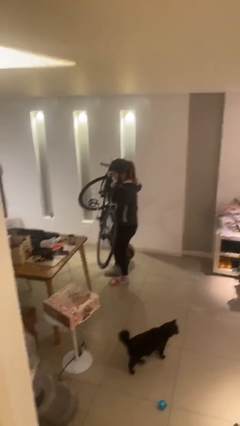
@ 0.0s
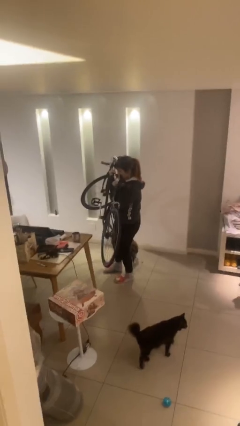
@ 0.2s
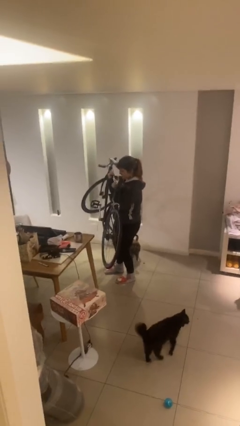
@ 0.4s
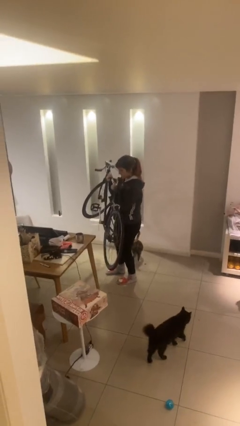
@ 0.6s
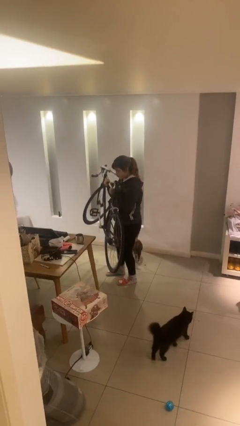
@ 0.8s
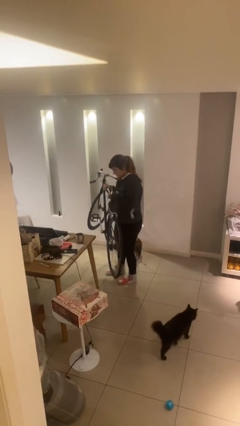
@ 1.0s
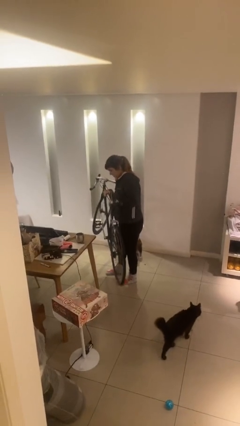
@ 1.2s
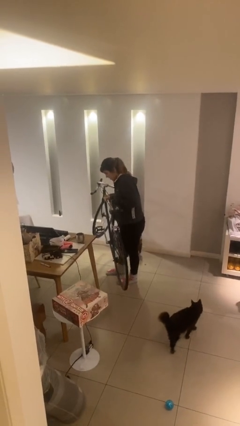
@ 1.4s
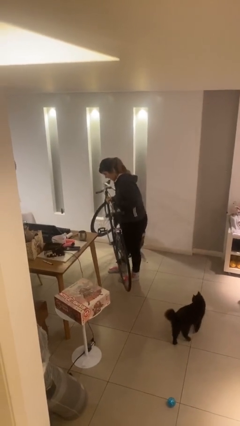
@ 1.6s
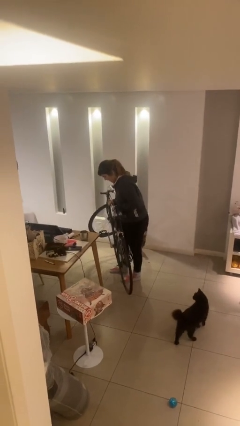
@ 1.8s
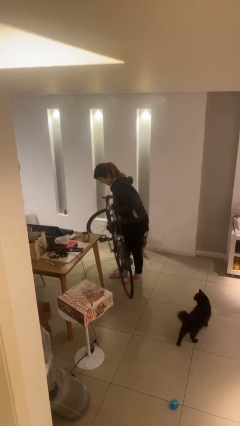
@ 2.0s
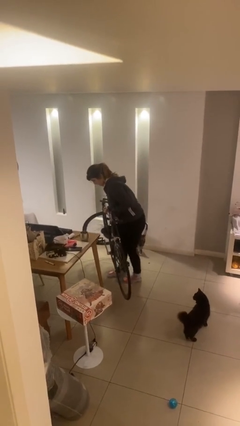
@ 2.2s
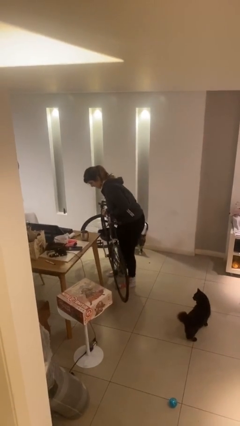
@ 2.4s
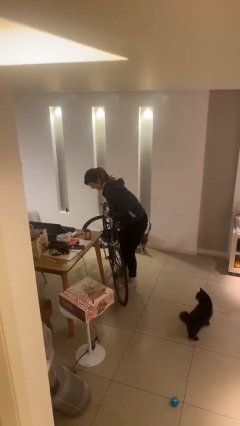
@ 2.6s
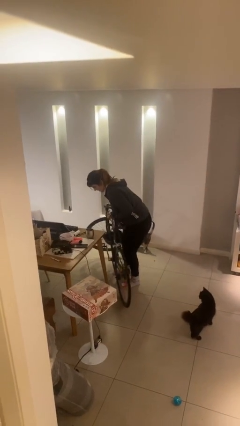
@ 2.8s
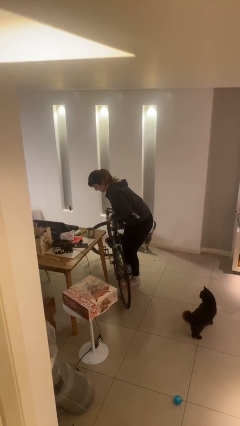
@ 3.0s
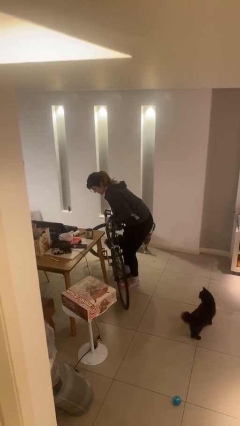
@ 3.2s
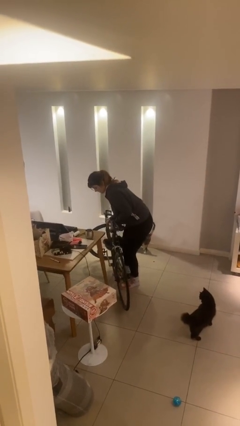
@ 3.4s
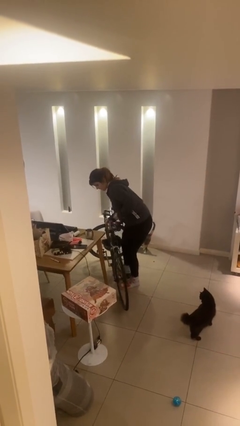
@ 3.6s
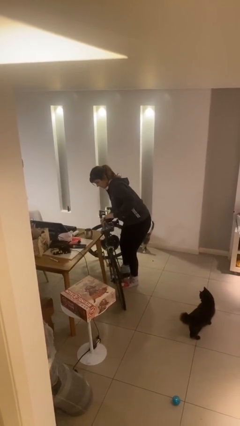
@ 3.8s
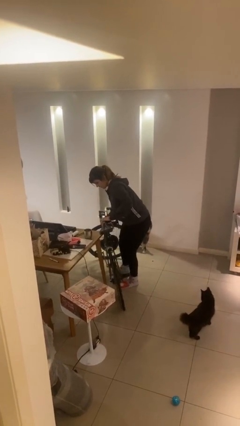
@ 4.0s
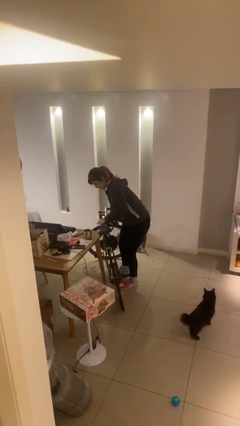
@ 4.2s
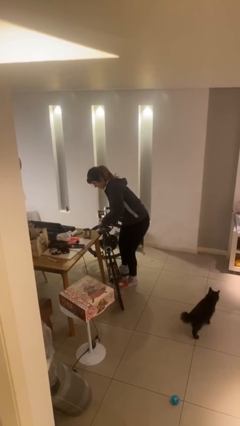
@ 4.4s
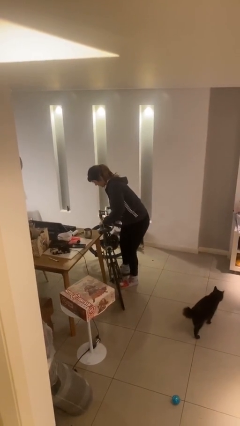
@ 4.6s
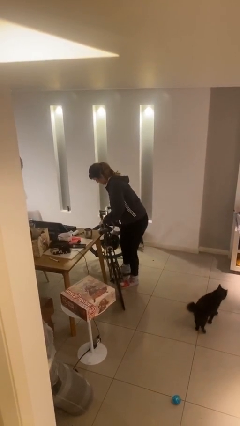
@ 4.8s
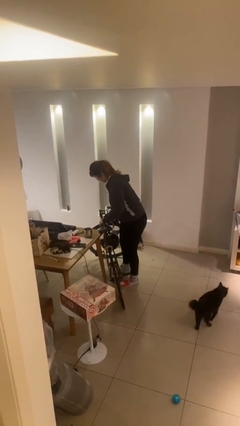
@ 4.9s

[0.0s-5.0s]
person puts down object on floor

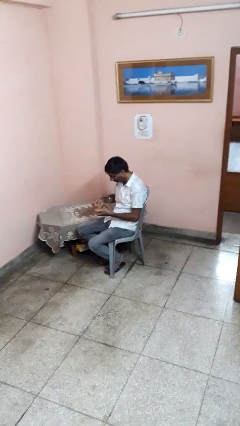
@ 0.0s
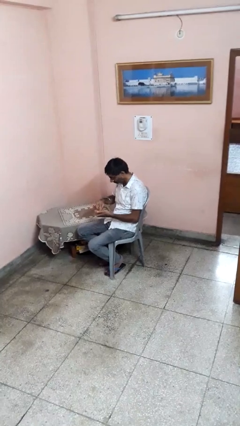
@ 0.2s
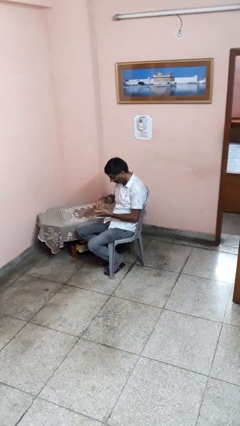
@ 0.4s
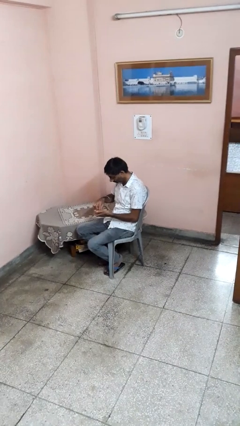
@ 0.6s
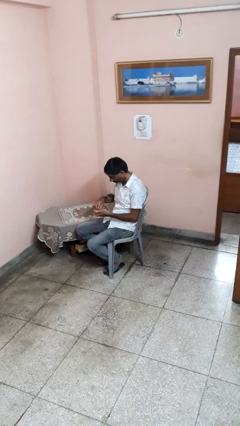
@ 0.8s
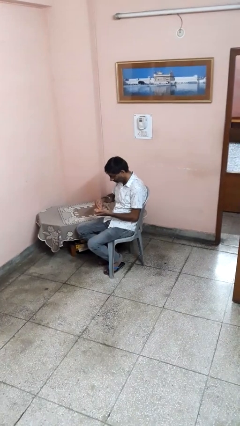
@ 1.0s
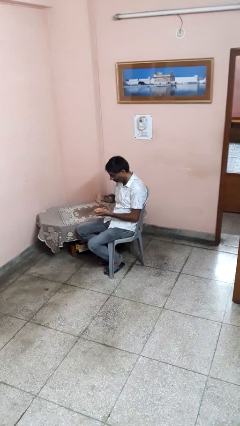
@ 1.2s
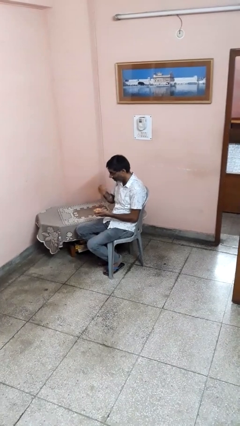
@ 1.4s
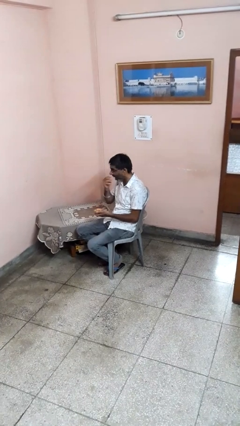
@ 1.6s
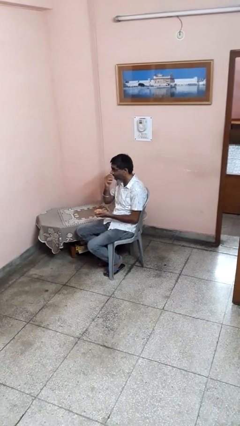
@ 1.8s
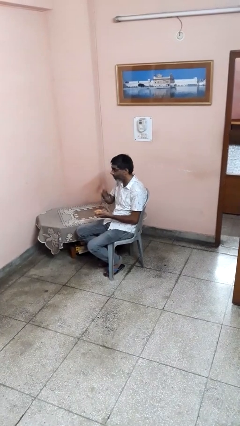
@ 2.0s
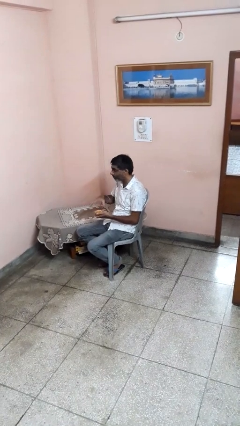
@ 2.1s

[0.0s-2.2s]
person eats with hands

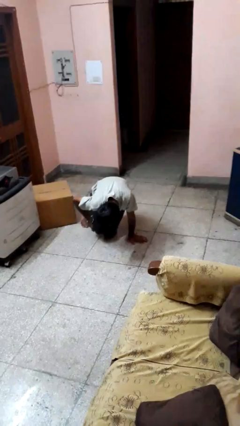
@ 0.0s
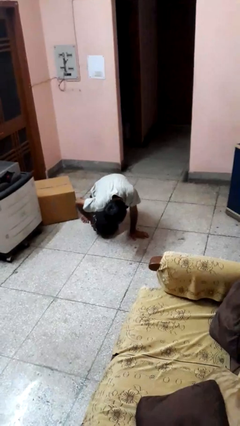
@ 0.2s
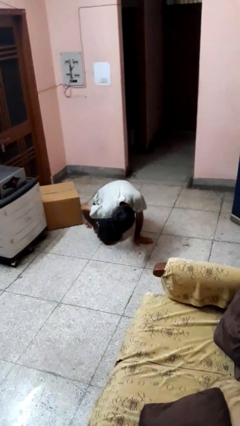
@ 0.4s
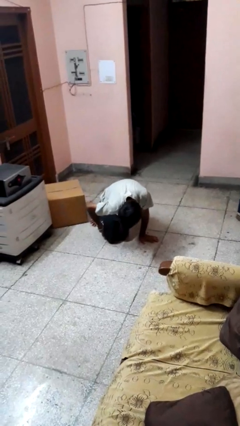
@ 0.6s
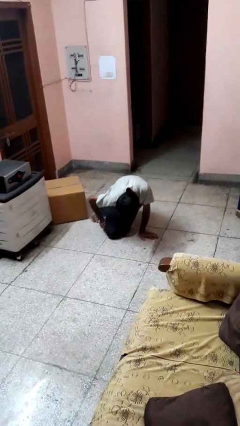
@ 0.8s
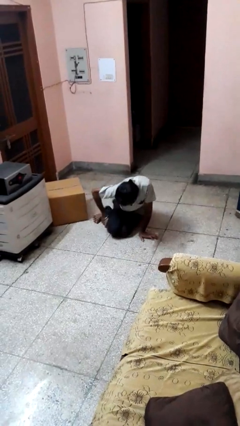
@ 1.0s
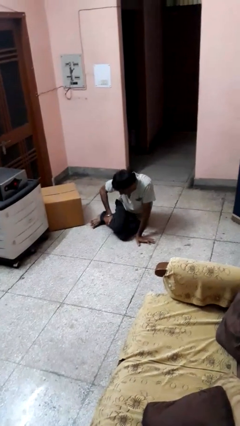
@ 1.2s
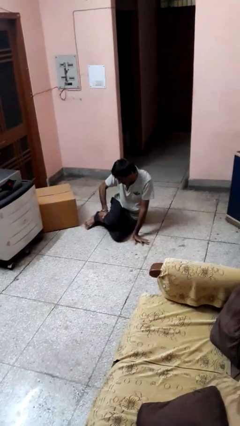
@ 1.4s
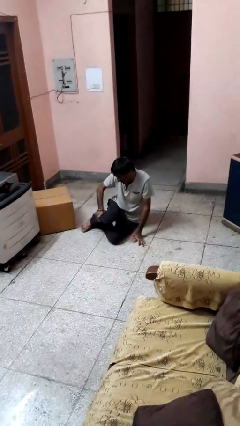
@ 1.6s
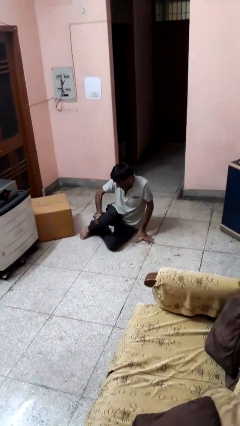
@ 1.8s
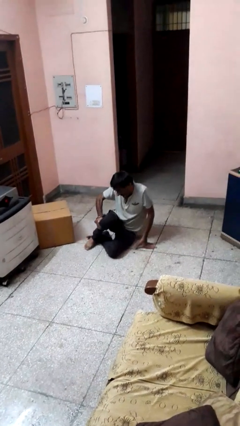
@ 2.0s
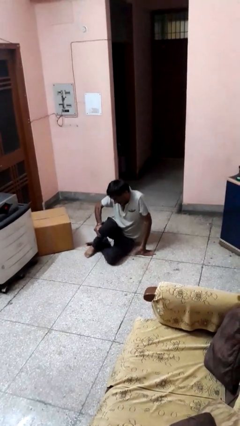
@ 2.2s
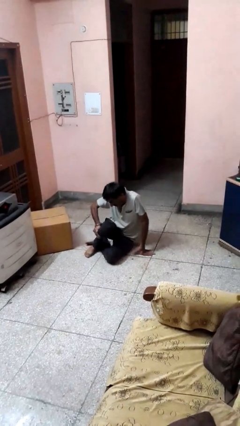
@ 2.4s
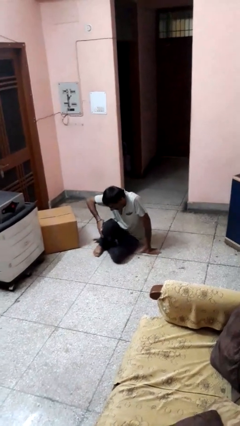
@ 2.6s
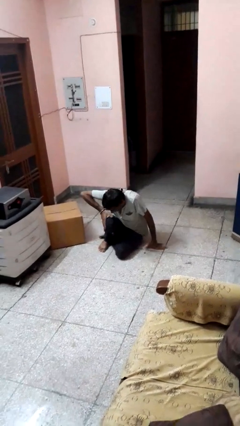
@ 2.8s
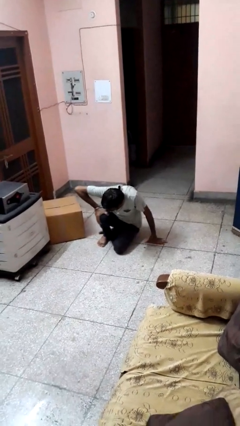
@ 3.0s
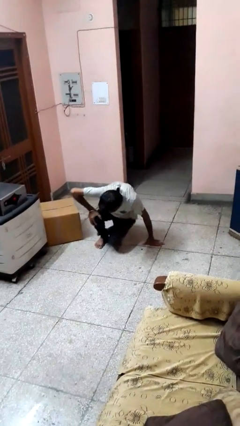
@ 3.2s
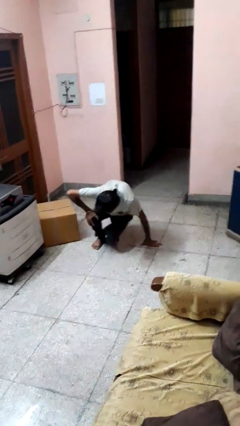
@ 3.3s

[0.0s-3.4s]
person lies down on floor

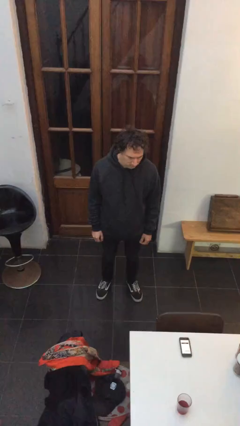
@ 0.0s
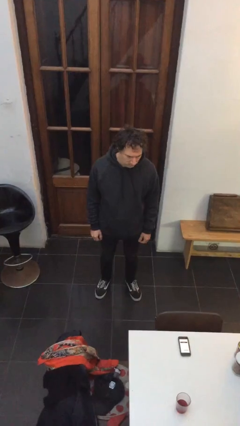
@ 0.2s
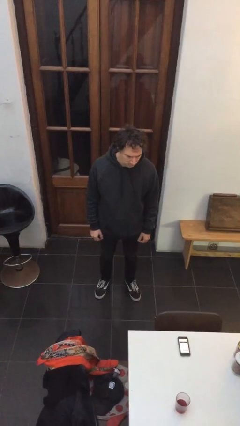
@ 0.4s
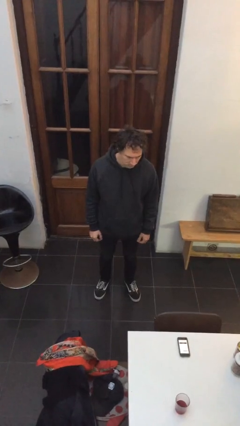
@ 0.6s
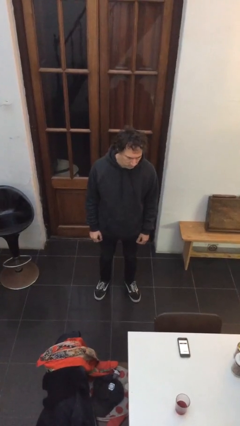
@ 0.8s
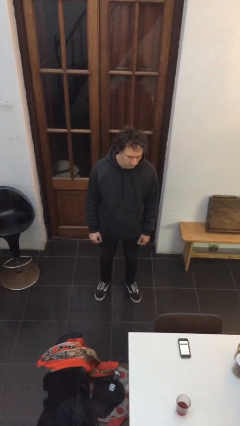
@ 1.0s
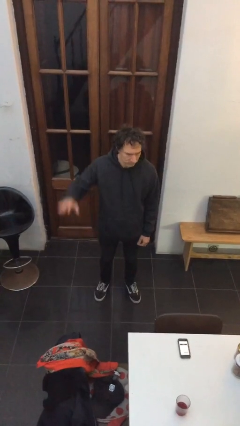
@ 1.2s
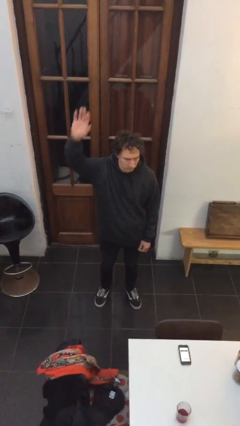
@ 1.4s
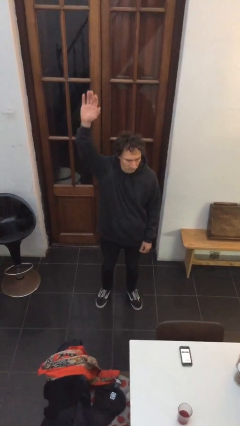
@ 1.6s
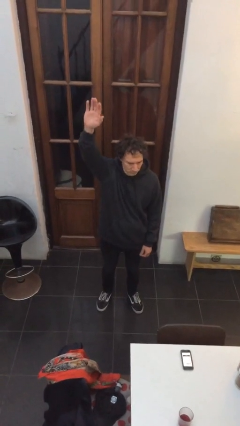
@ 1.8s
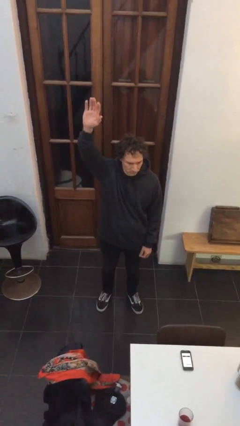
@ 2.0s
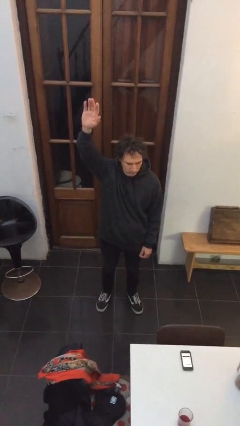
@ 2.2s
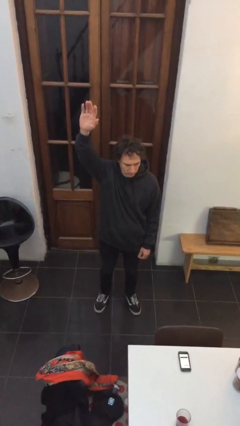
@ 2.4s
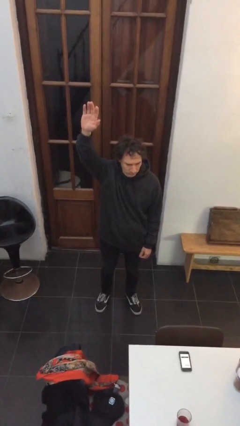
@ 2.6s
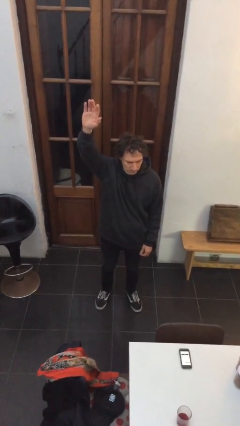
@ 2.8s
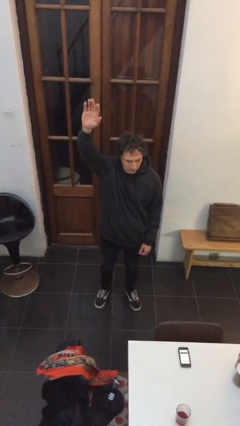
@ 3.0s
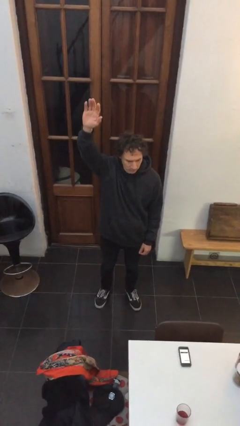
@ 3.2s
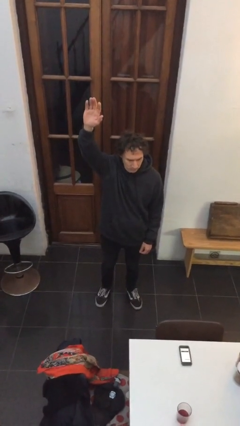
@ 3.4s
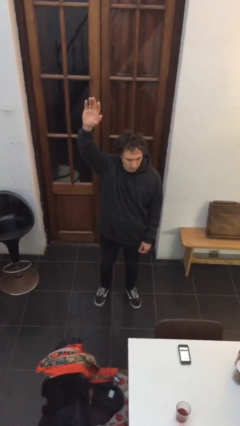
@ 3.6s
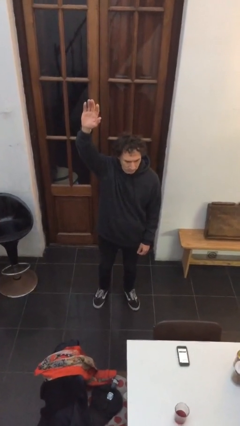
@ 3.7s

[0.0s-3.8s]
person gestures raise hand

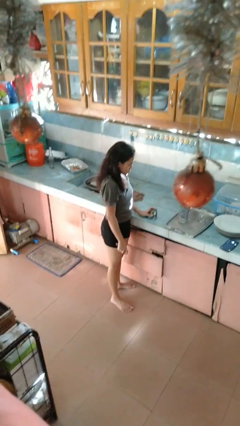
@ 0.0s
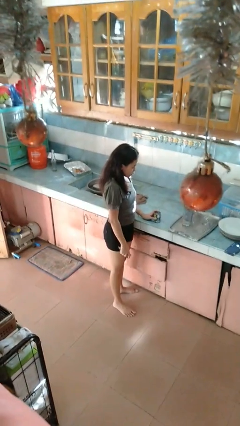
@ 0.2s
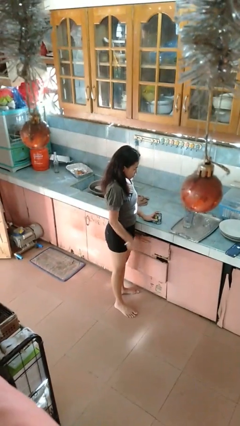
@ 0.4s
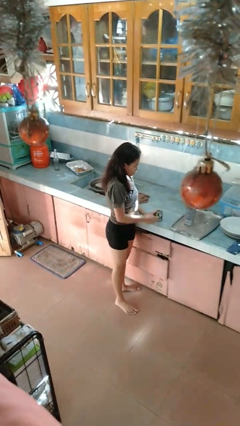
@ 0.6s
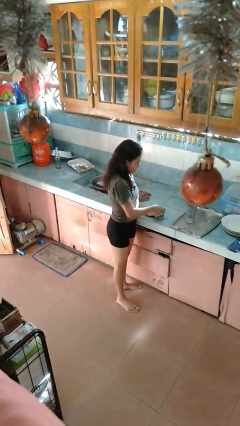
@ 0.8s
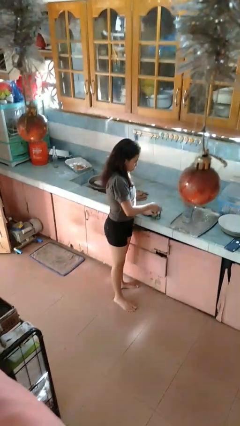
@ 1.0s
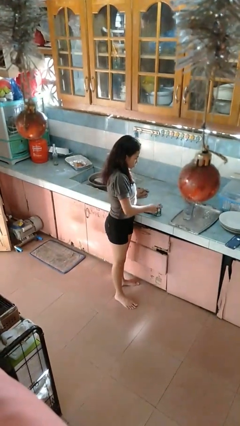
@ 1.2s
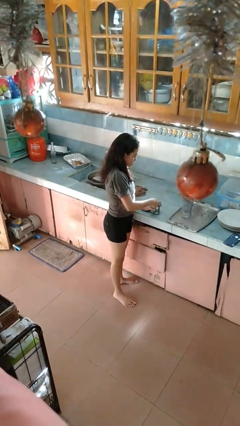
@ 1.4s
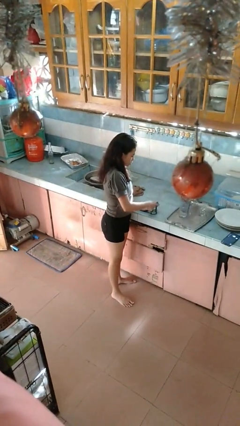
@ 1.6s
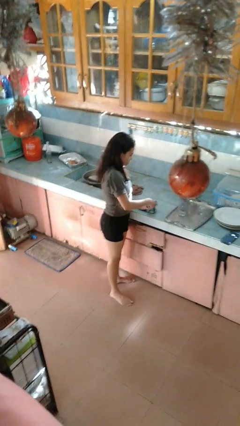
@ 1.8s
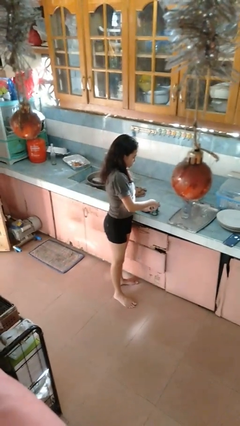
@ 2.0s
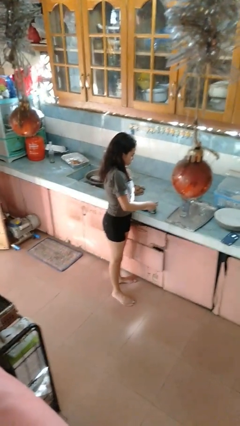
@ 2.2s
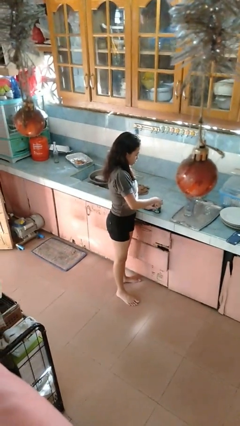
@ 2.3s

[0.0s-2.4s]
person opens can with can opener

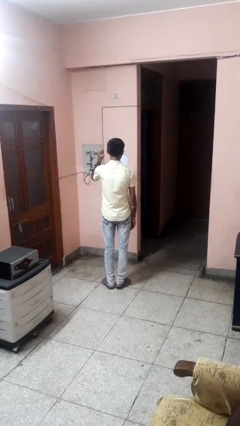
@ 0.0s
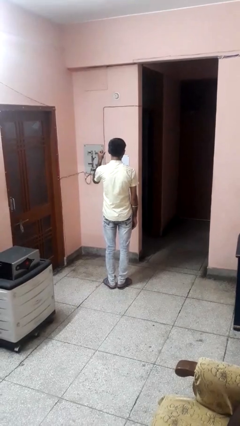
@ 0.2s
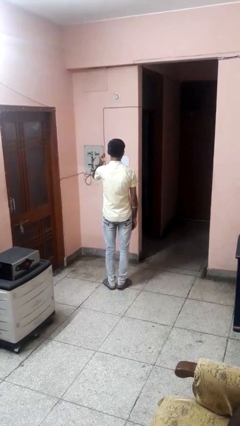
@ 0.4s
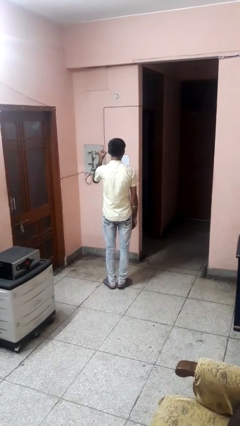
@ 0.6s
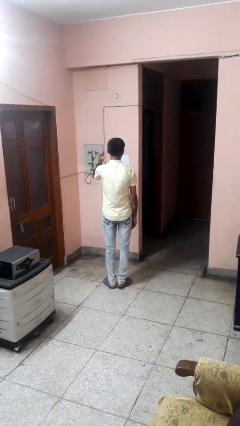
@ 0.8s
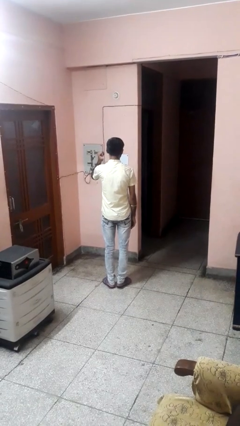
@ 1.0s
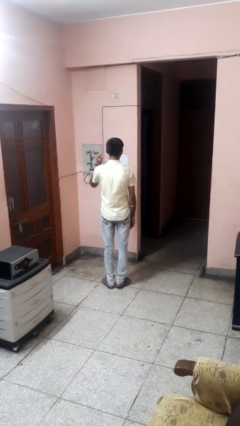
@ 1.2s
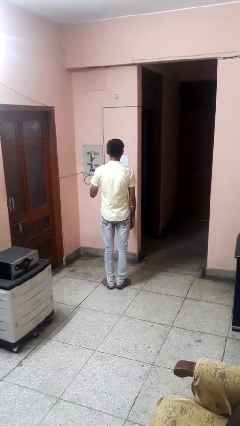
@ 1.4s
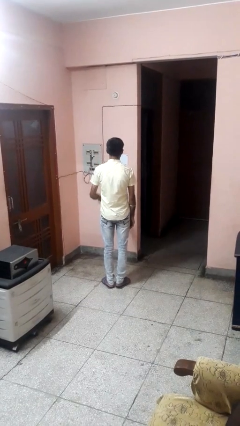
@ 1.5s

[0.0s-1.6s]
person gestures behind me
